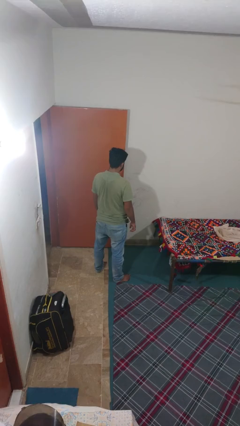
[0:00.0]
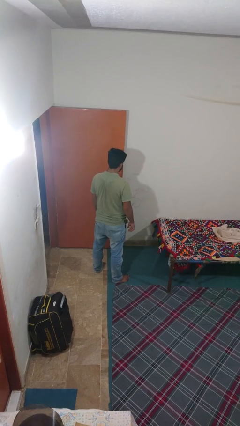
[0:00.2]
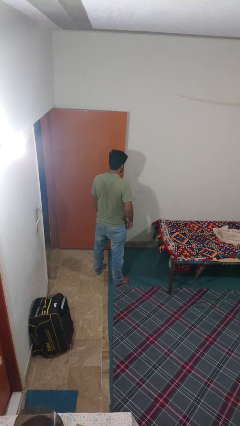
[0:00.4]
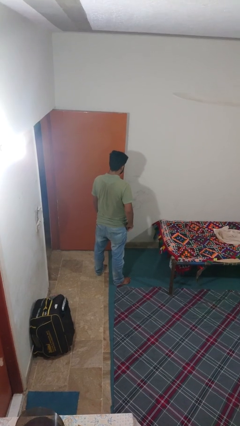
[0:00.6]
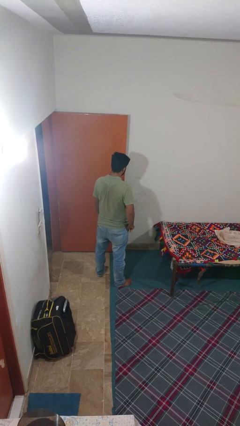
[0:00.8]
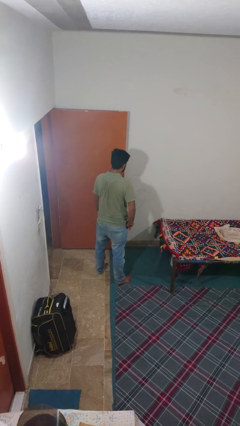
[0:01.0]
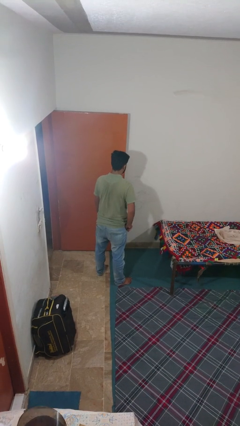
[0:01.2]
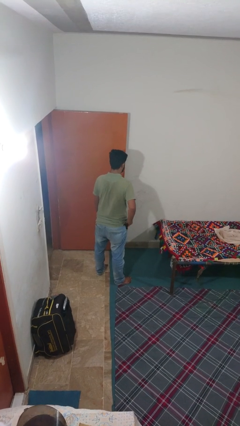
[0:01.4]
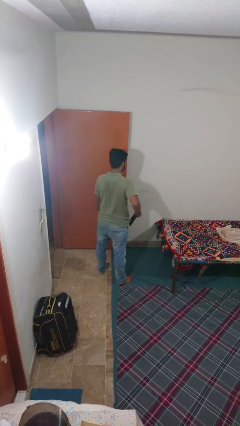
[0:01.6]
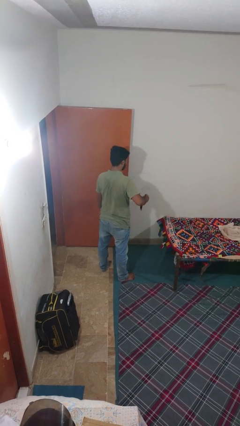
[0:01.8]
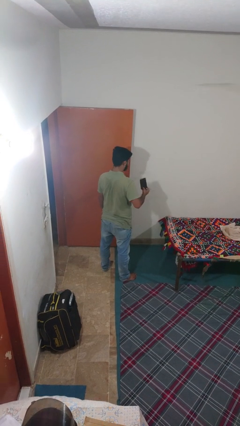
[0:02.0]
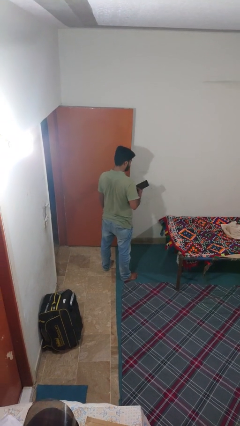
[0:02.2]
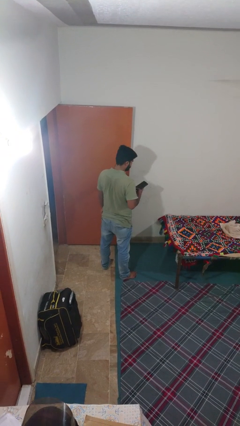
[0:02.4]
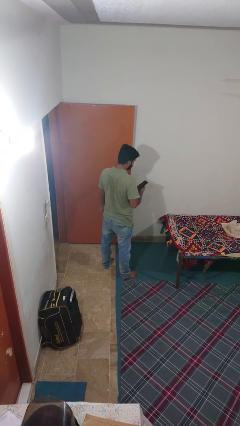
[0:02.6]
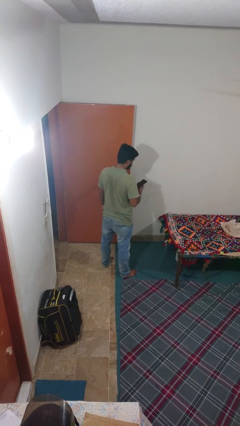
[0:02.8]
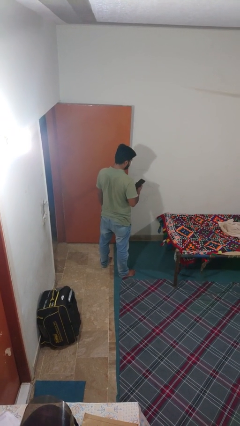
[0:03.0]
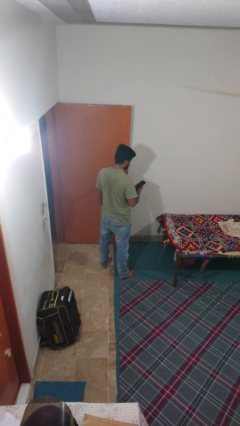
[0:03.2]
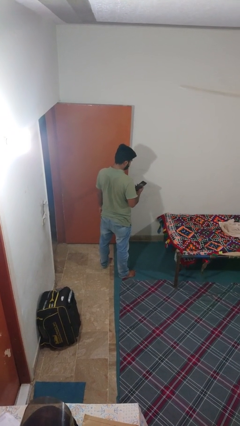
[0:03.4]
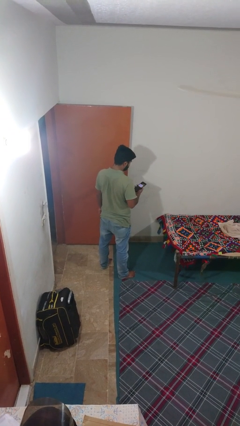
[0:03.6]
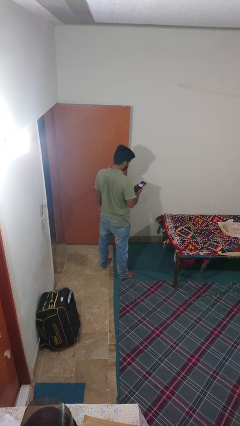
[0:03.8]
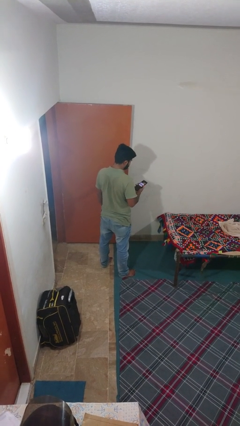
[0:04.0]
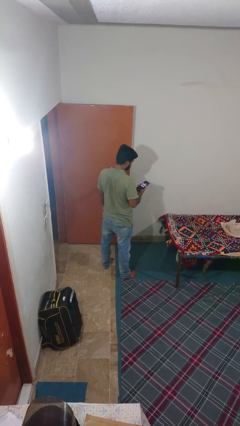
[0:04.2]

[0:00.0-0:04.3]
person takes phone from pocket

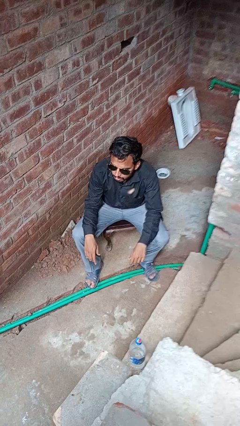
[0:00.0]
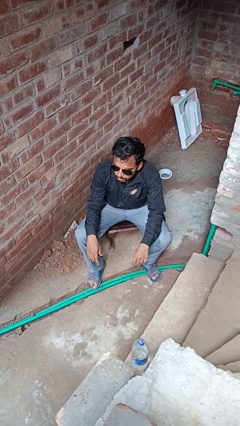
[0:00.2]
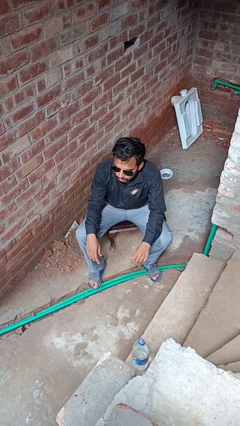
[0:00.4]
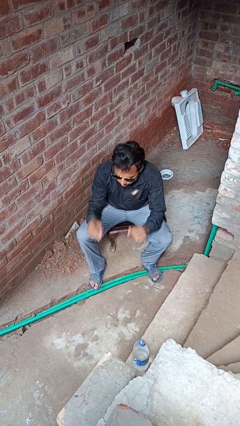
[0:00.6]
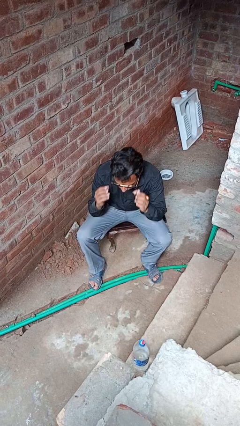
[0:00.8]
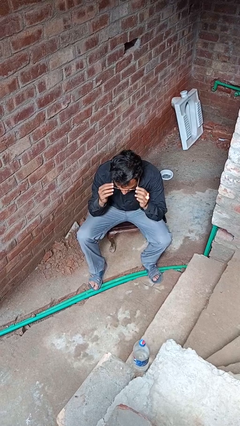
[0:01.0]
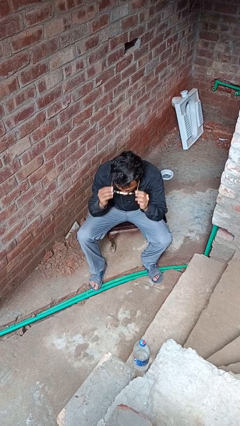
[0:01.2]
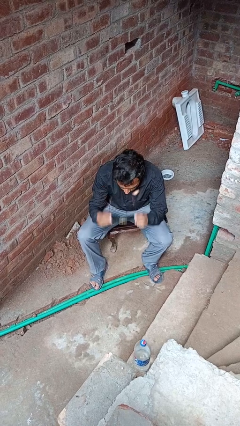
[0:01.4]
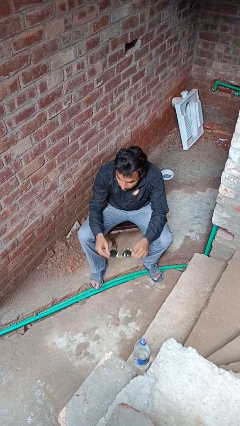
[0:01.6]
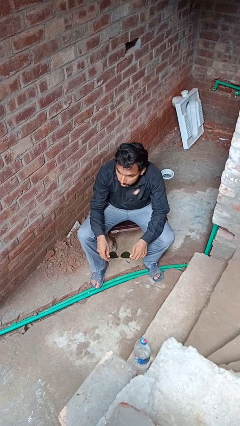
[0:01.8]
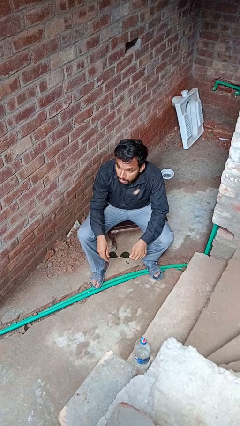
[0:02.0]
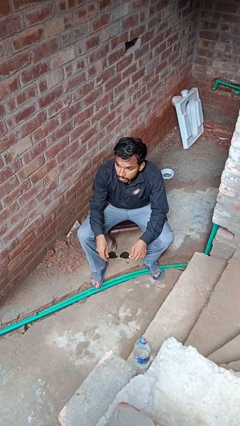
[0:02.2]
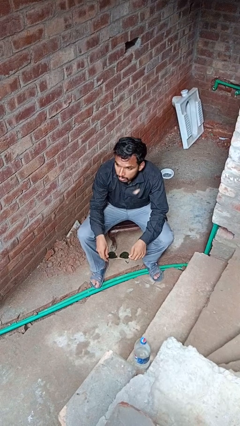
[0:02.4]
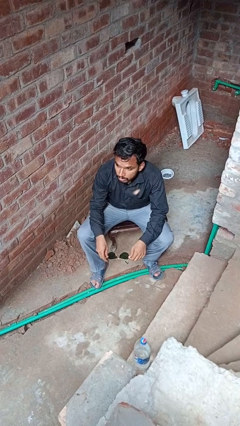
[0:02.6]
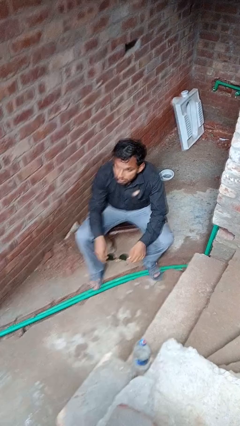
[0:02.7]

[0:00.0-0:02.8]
person takes off glasses

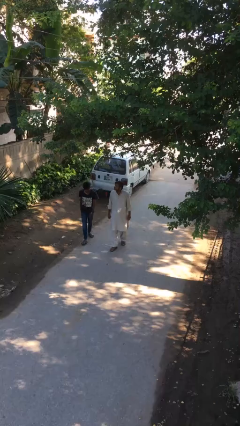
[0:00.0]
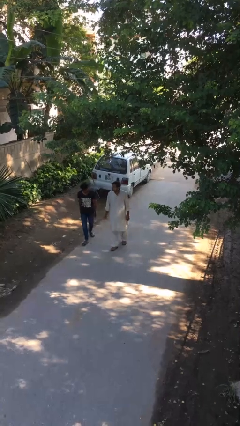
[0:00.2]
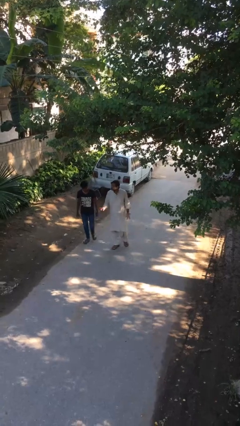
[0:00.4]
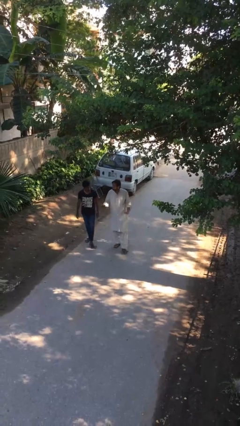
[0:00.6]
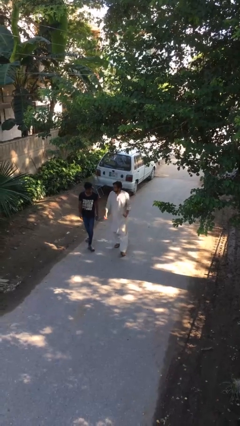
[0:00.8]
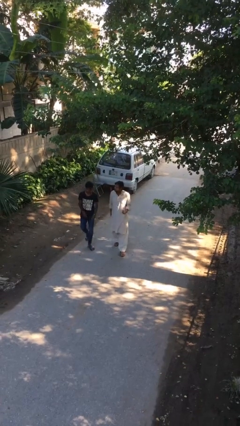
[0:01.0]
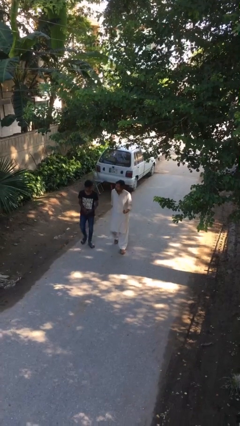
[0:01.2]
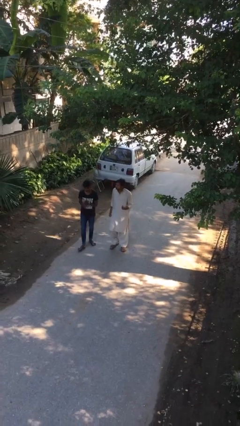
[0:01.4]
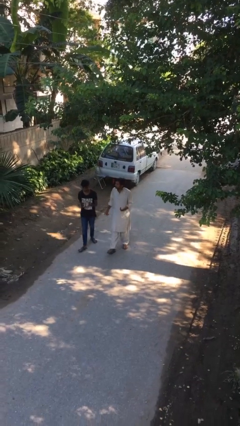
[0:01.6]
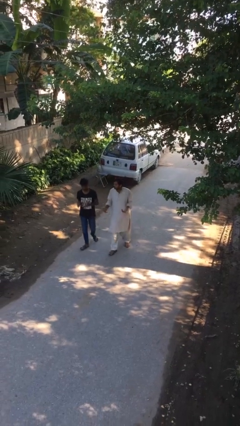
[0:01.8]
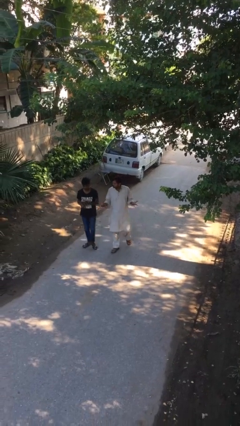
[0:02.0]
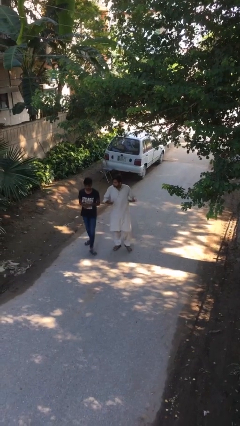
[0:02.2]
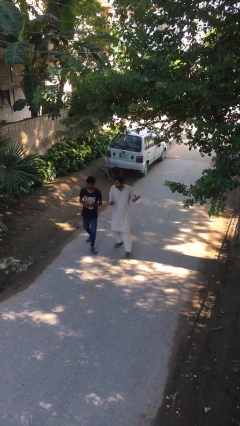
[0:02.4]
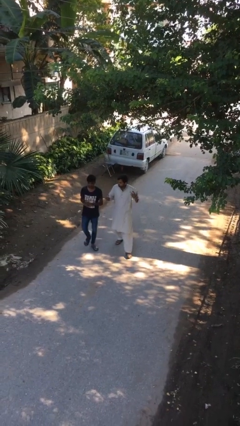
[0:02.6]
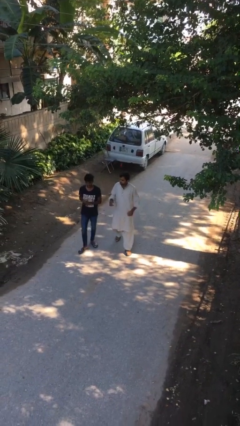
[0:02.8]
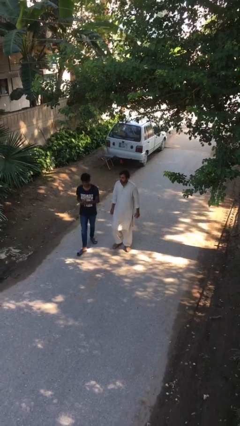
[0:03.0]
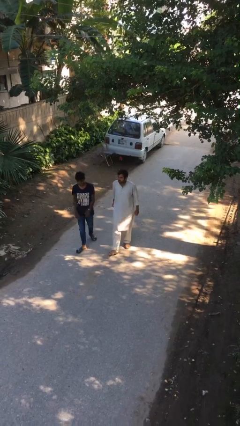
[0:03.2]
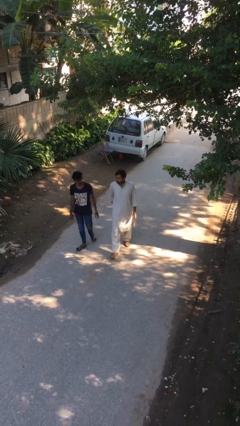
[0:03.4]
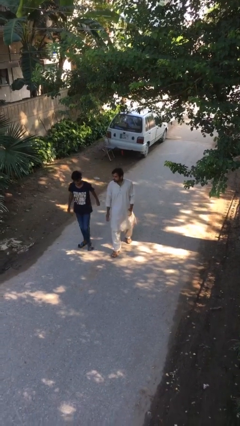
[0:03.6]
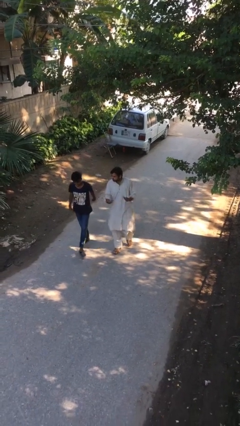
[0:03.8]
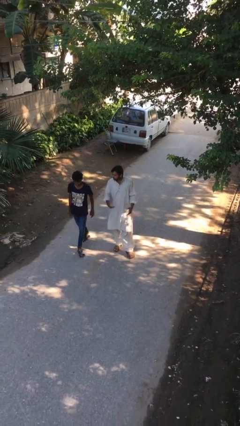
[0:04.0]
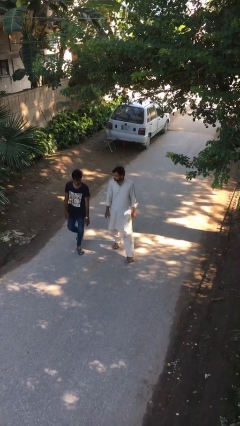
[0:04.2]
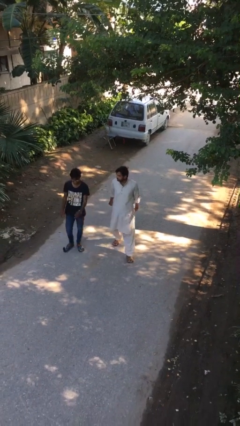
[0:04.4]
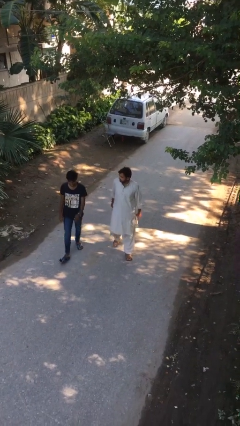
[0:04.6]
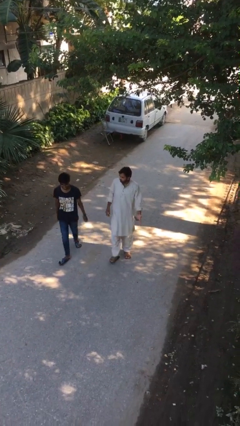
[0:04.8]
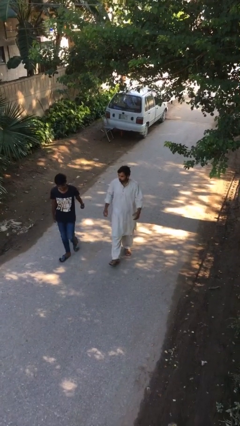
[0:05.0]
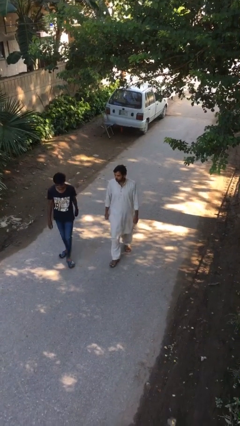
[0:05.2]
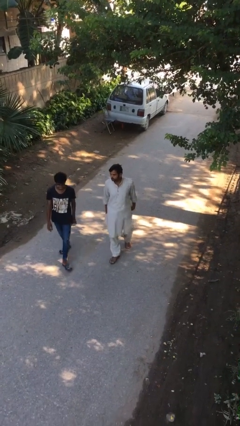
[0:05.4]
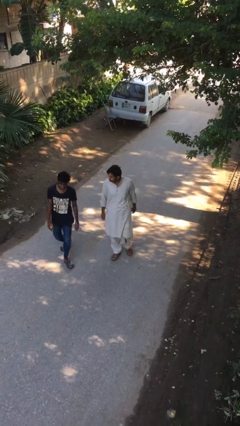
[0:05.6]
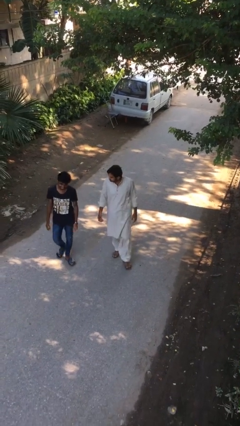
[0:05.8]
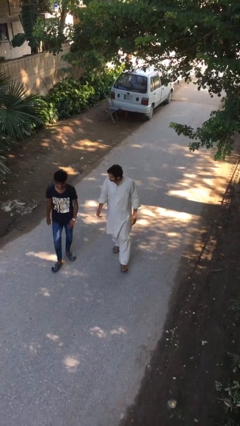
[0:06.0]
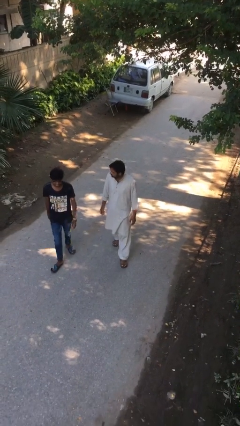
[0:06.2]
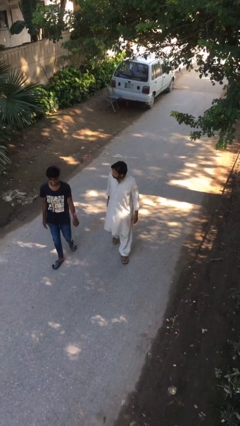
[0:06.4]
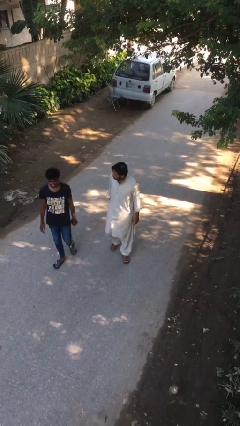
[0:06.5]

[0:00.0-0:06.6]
person talks to person

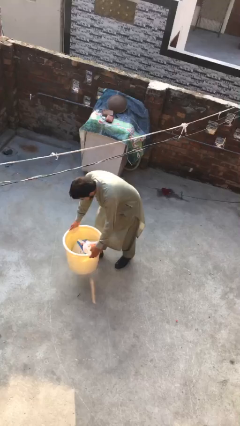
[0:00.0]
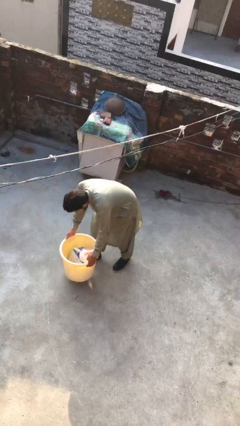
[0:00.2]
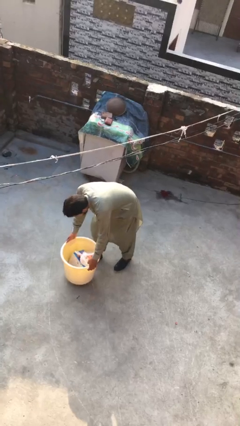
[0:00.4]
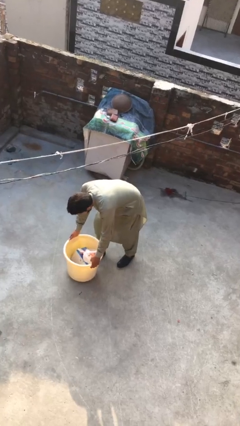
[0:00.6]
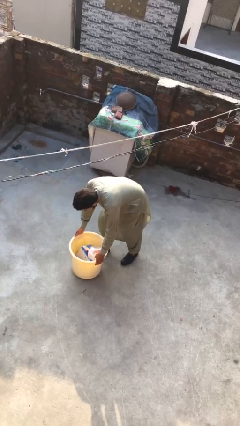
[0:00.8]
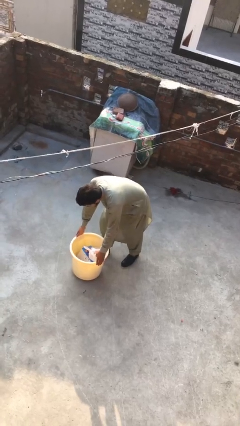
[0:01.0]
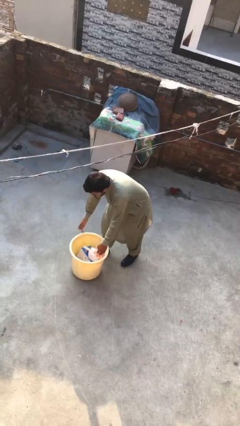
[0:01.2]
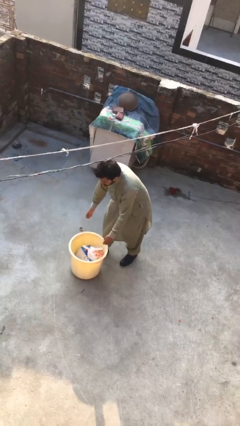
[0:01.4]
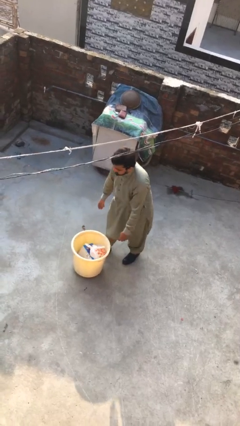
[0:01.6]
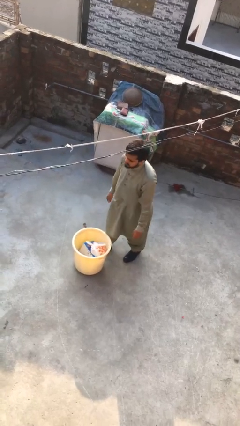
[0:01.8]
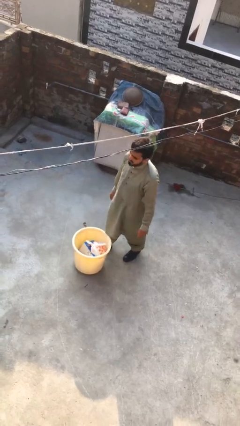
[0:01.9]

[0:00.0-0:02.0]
person puts down object on floor

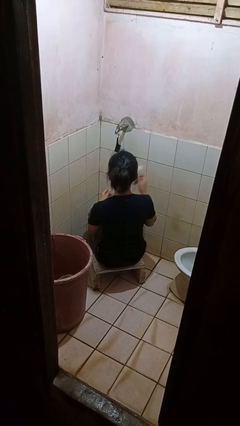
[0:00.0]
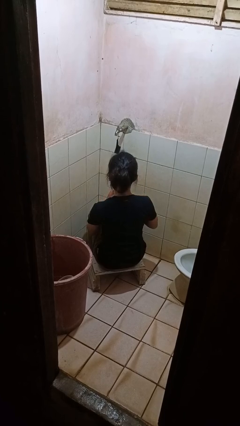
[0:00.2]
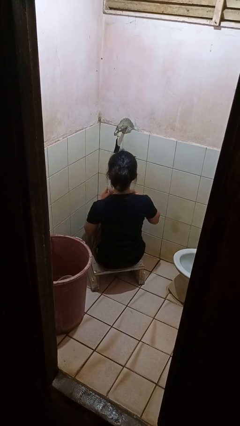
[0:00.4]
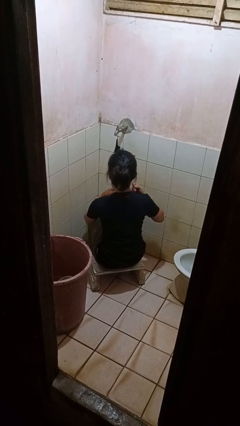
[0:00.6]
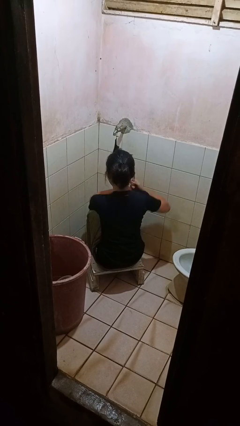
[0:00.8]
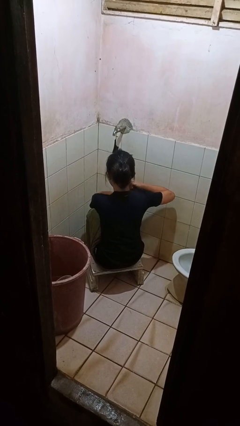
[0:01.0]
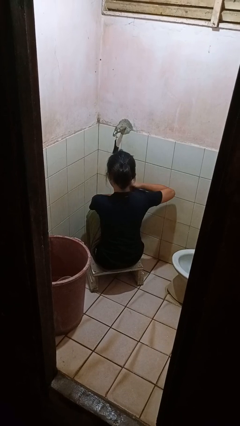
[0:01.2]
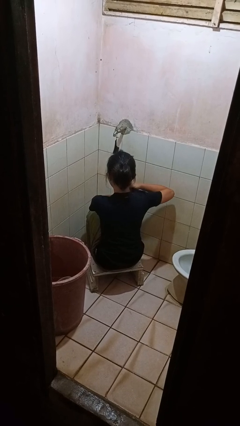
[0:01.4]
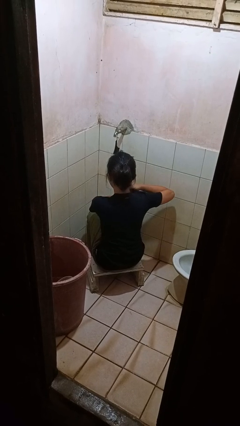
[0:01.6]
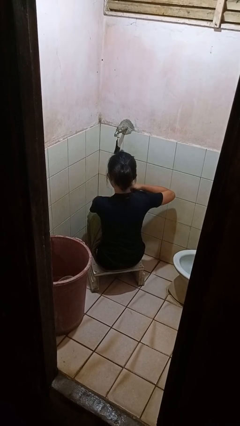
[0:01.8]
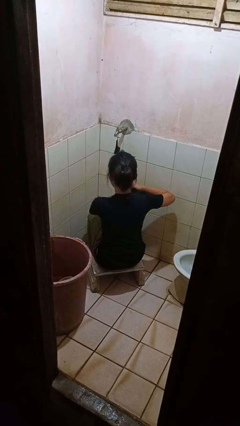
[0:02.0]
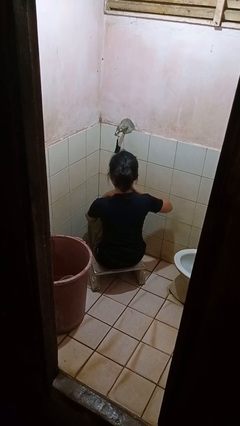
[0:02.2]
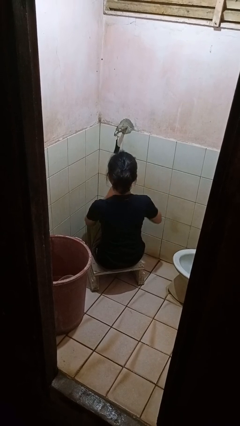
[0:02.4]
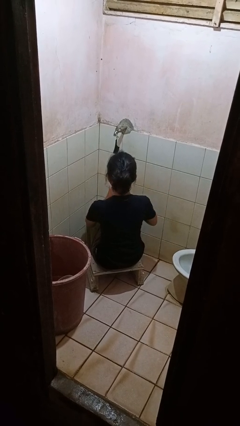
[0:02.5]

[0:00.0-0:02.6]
person applies deodorant
